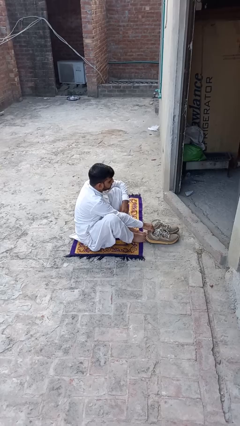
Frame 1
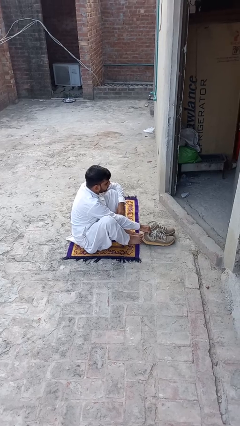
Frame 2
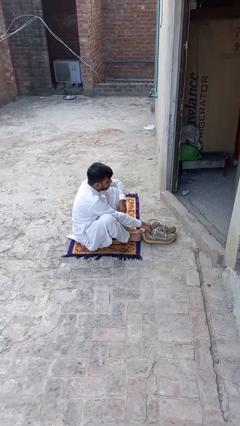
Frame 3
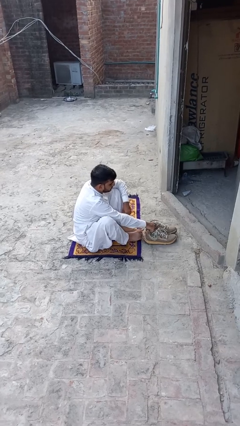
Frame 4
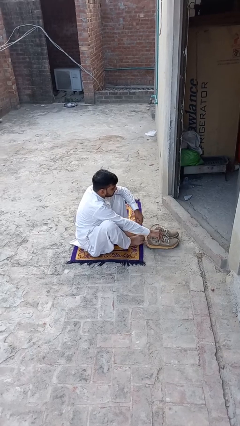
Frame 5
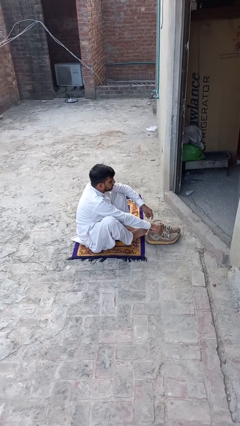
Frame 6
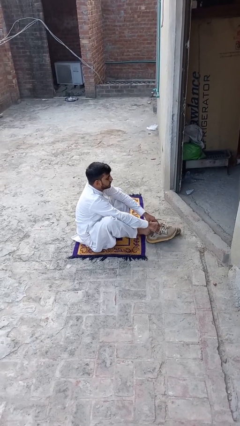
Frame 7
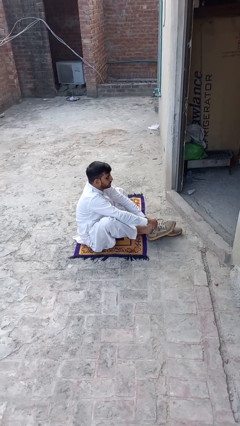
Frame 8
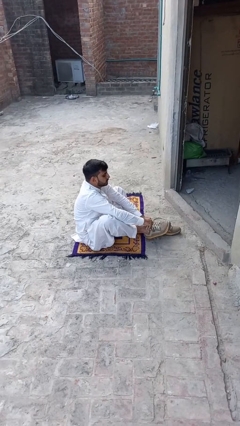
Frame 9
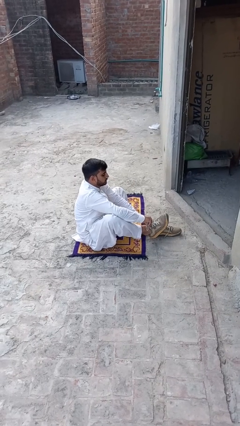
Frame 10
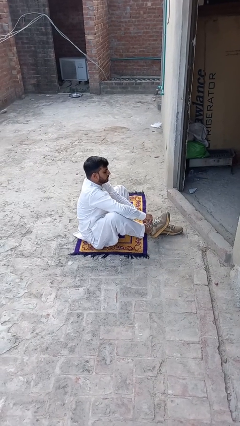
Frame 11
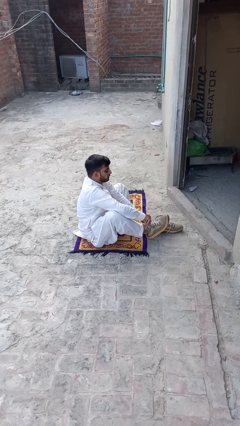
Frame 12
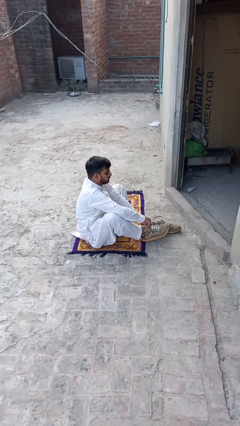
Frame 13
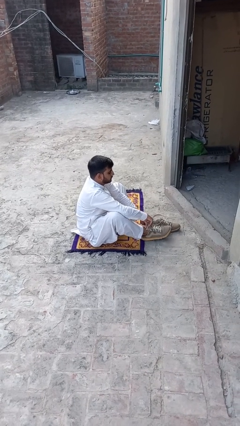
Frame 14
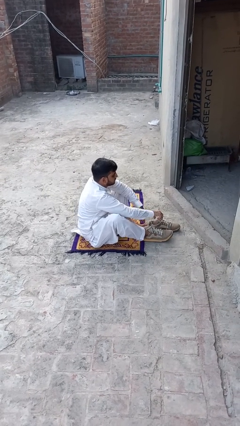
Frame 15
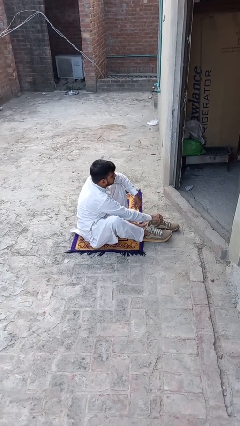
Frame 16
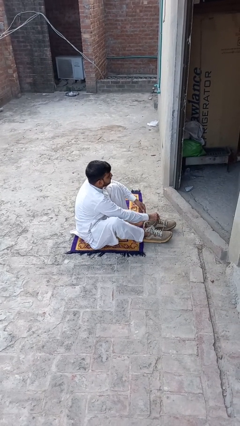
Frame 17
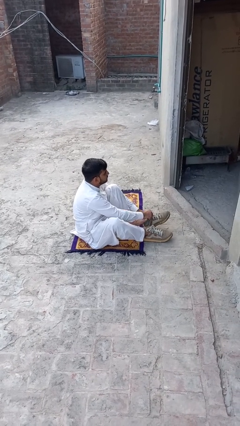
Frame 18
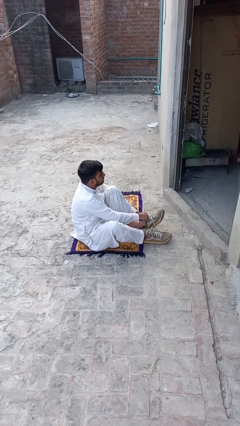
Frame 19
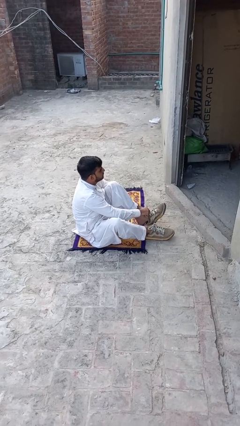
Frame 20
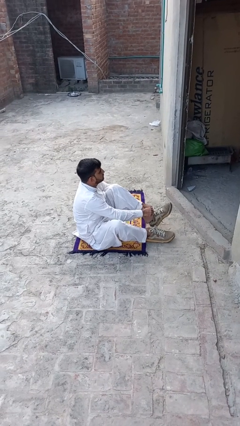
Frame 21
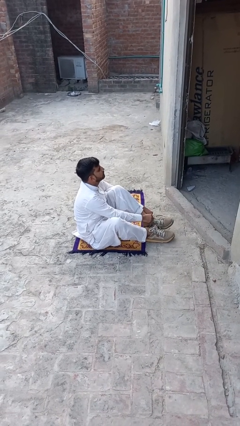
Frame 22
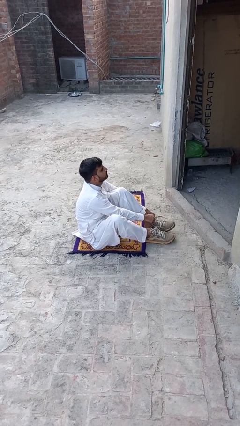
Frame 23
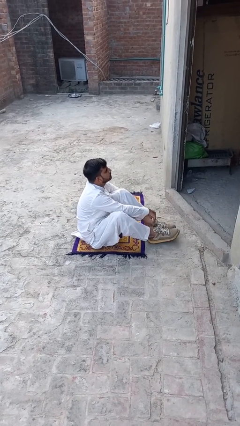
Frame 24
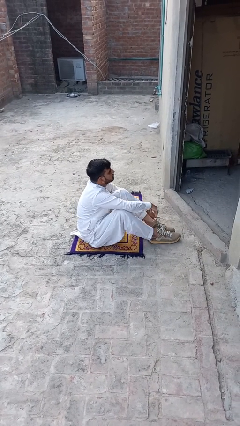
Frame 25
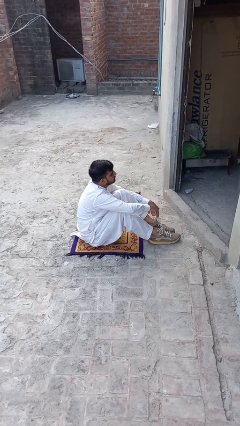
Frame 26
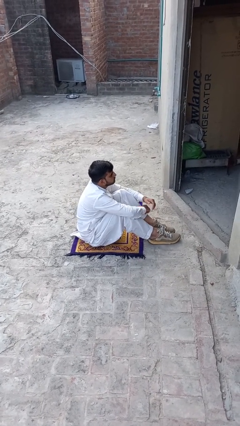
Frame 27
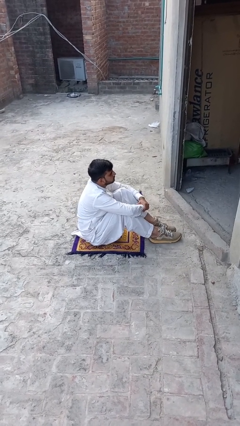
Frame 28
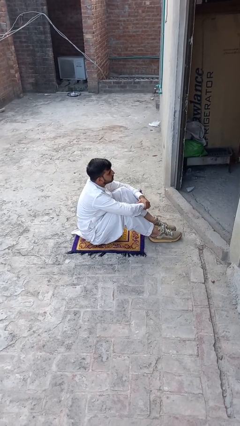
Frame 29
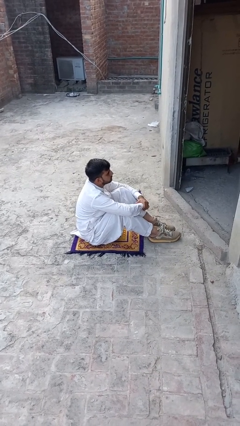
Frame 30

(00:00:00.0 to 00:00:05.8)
person puts on shoes

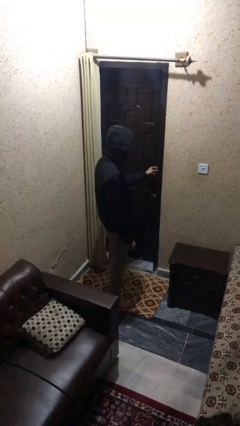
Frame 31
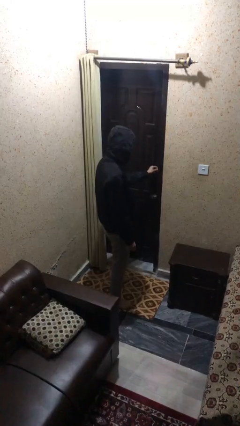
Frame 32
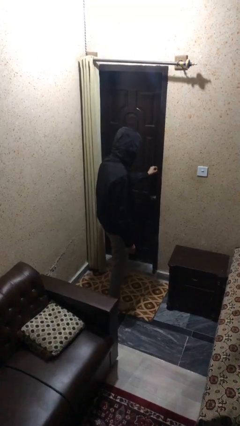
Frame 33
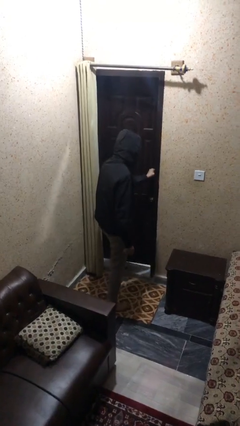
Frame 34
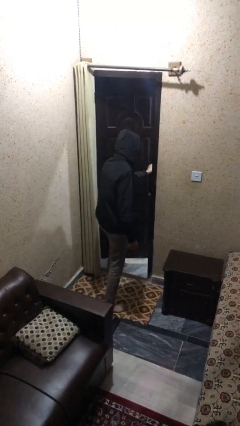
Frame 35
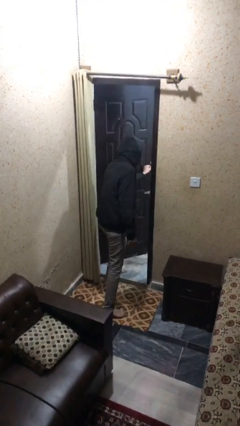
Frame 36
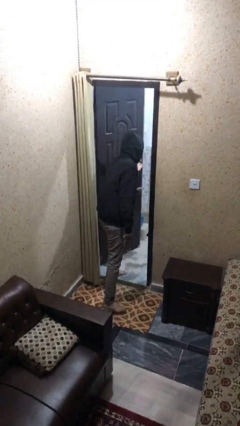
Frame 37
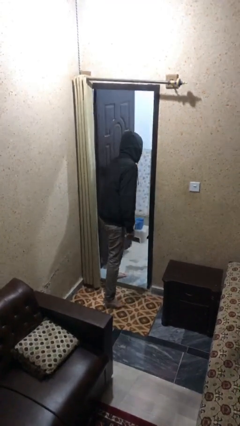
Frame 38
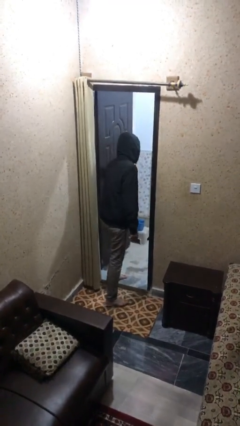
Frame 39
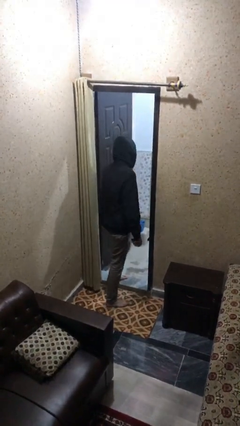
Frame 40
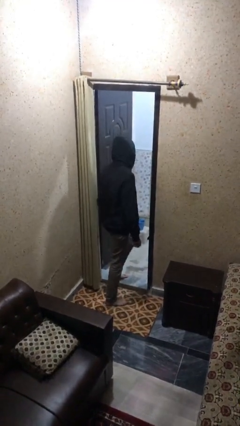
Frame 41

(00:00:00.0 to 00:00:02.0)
person opens facility door

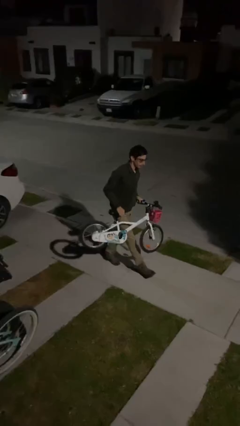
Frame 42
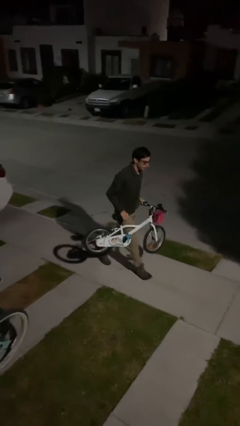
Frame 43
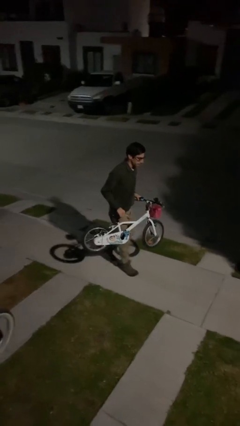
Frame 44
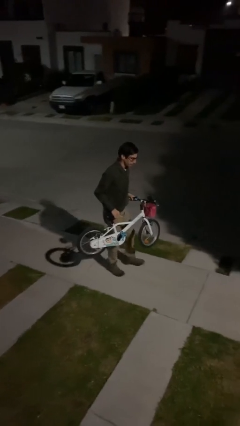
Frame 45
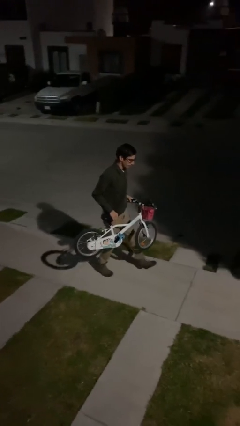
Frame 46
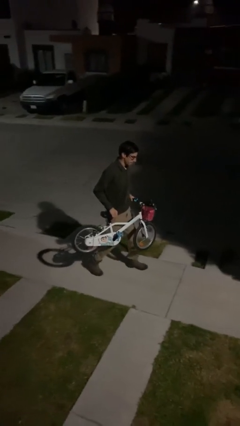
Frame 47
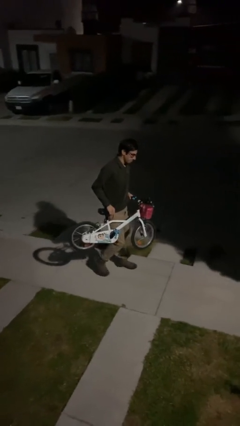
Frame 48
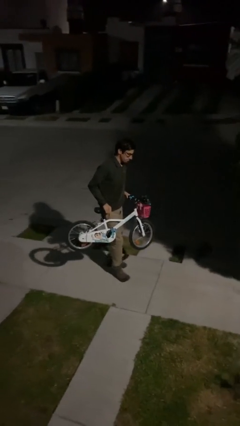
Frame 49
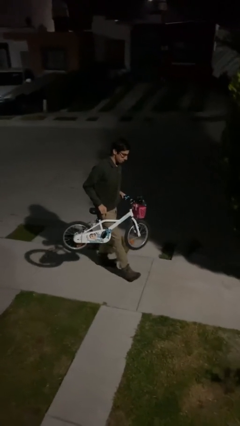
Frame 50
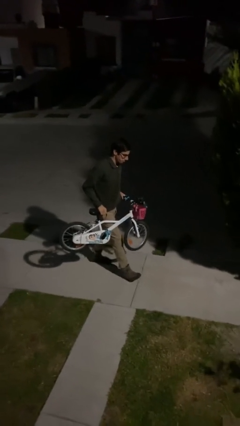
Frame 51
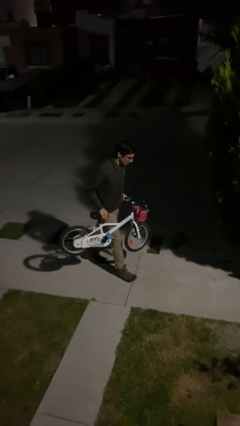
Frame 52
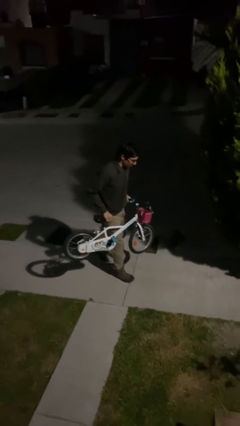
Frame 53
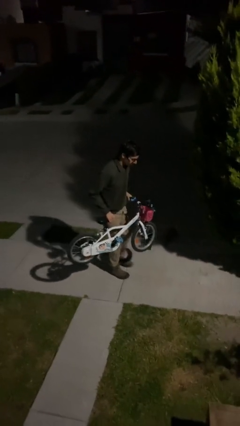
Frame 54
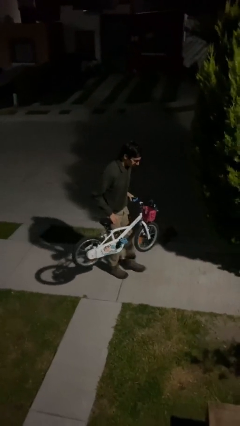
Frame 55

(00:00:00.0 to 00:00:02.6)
person carries heavy object

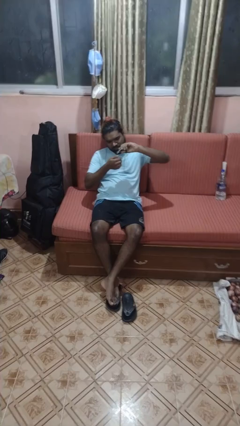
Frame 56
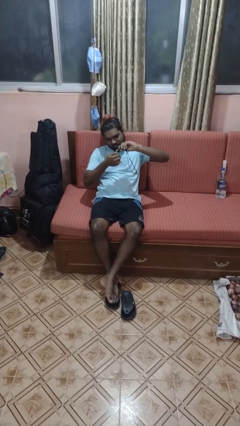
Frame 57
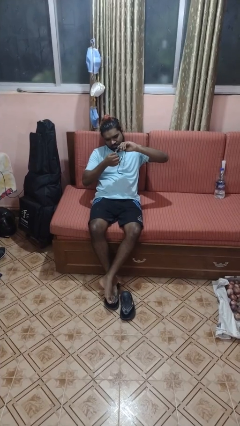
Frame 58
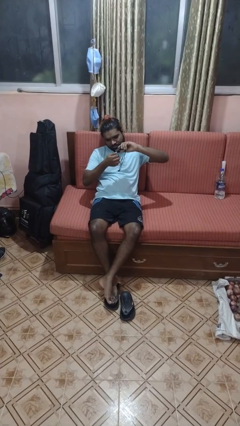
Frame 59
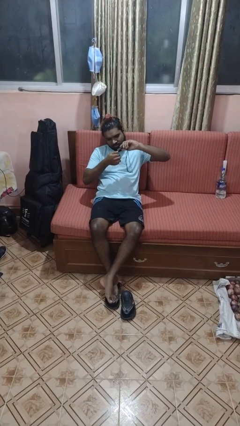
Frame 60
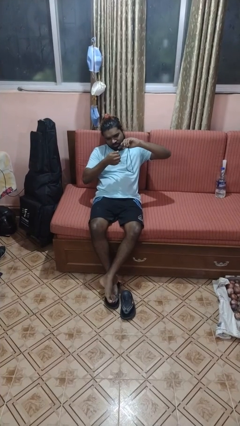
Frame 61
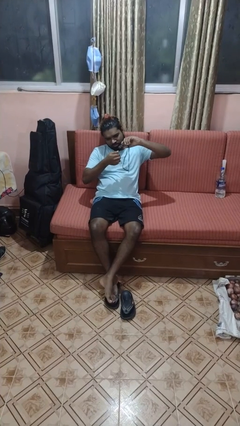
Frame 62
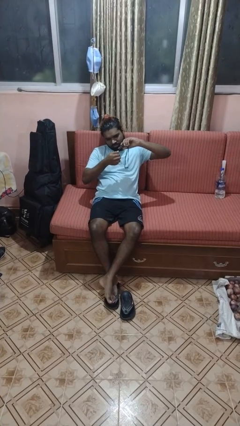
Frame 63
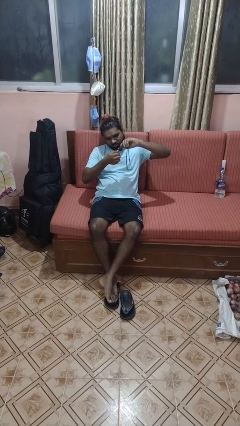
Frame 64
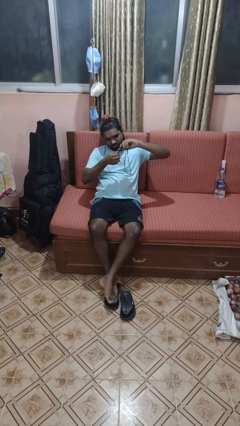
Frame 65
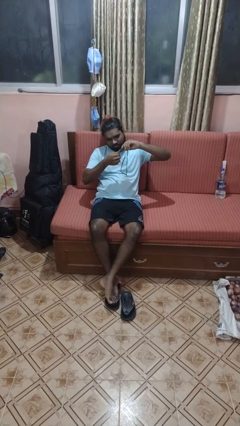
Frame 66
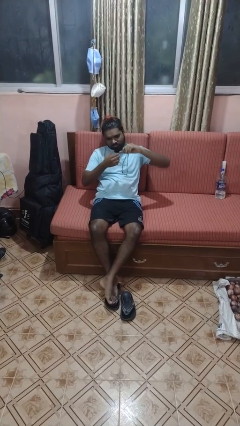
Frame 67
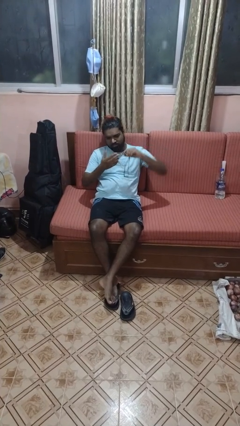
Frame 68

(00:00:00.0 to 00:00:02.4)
person clips fingernails

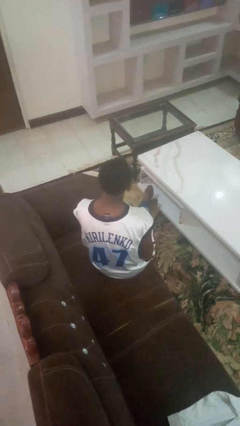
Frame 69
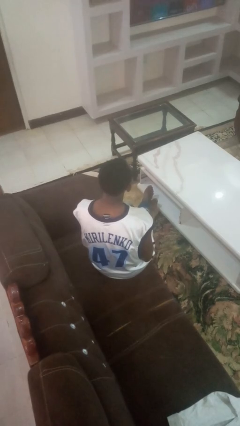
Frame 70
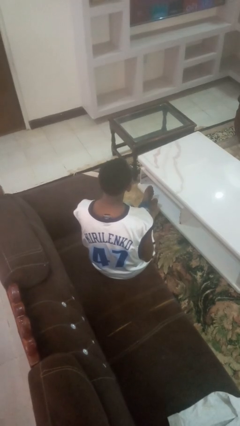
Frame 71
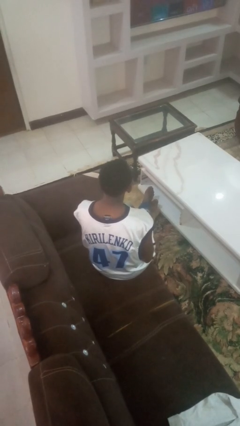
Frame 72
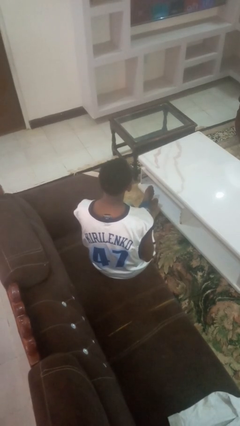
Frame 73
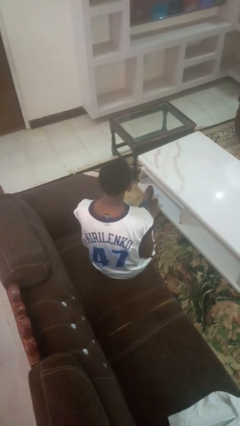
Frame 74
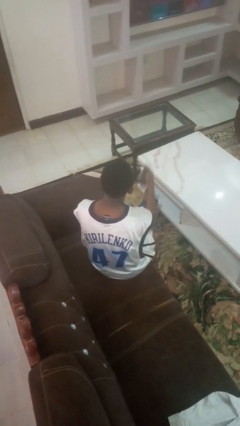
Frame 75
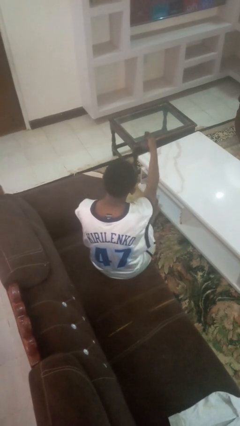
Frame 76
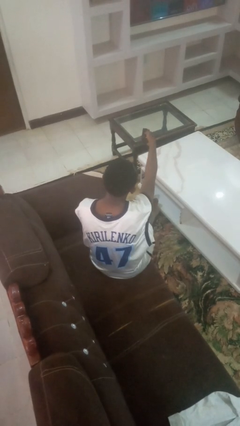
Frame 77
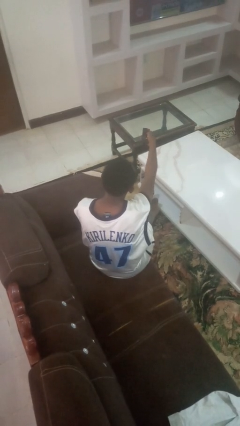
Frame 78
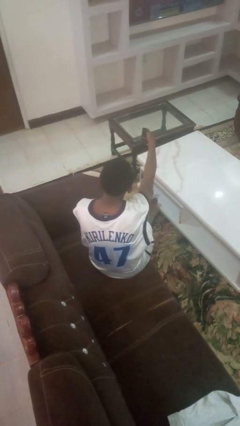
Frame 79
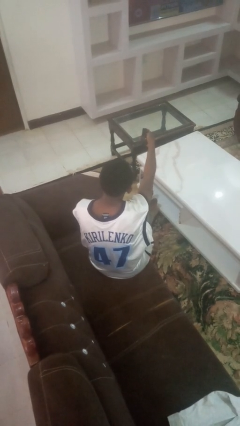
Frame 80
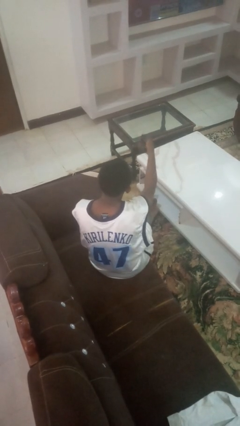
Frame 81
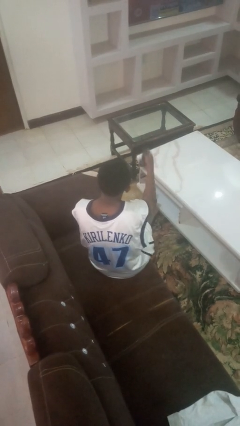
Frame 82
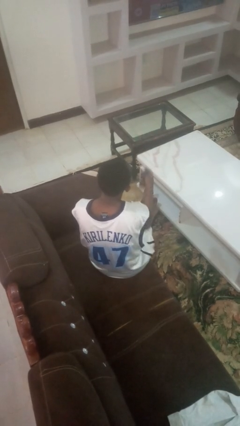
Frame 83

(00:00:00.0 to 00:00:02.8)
person uses television remote

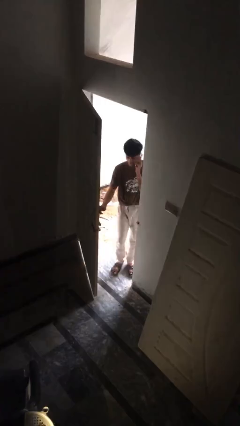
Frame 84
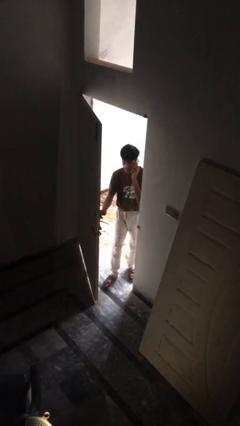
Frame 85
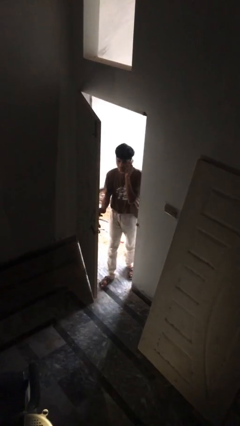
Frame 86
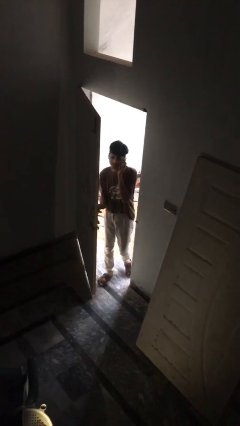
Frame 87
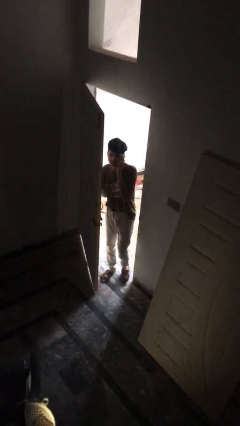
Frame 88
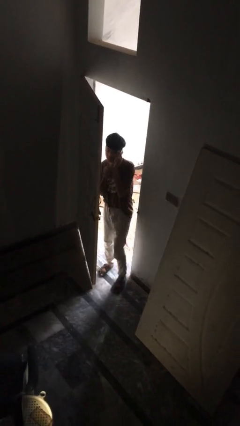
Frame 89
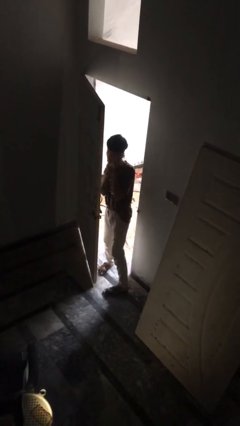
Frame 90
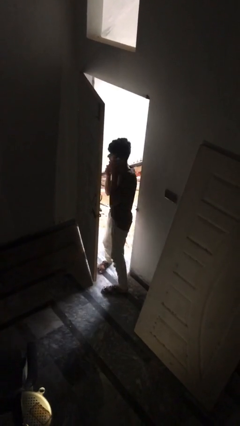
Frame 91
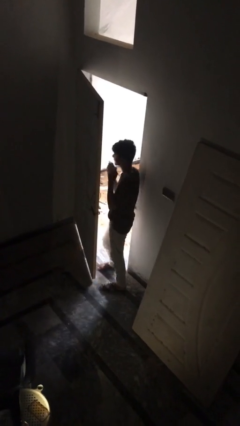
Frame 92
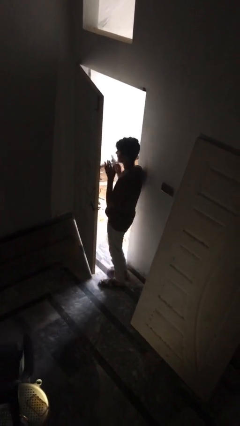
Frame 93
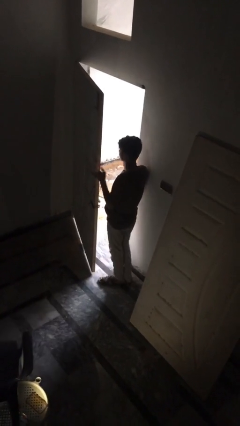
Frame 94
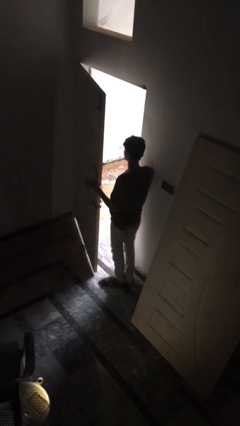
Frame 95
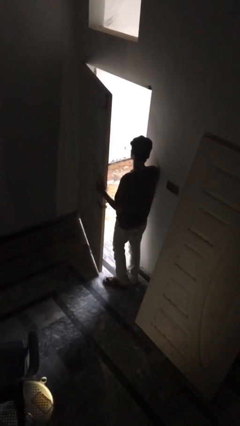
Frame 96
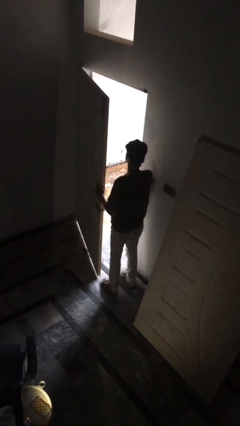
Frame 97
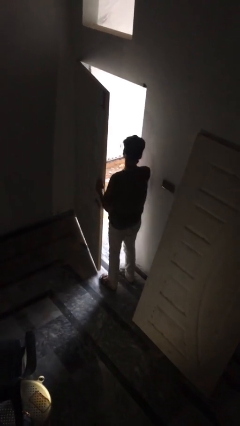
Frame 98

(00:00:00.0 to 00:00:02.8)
person enters scene through structure
